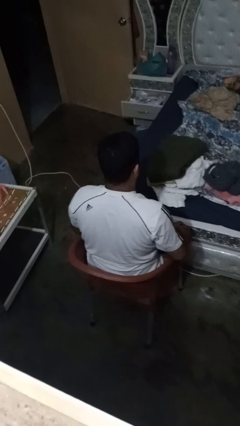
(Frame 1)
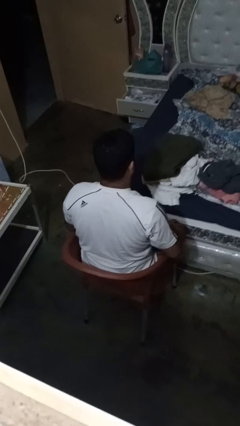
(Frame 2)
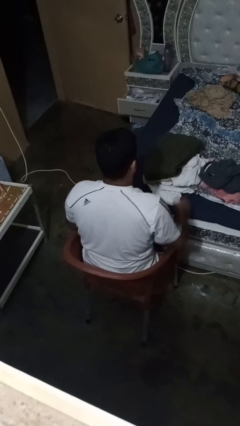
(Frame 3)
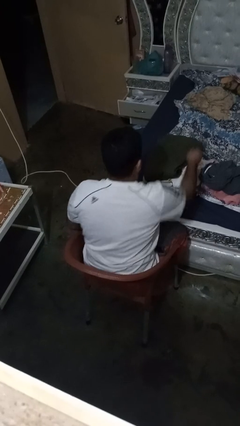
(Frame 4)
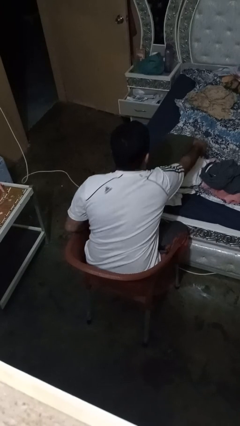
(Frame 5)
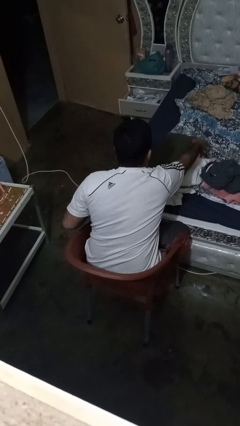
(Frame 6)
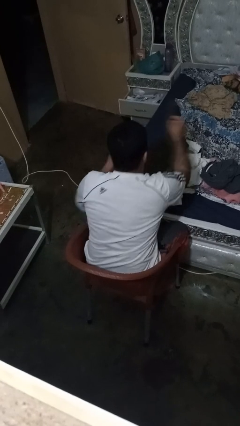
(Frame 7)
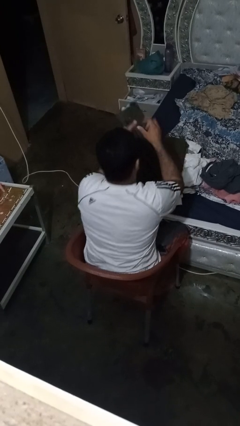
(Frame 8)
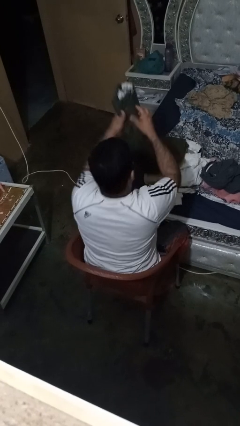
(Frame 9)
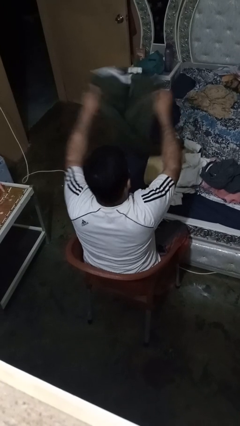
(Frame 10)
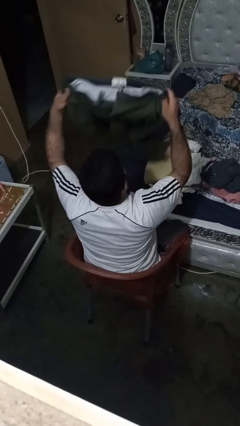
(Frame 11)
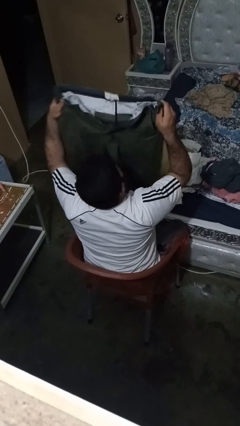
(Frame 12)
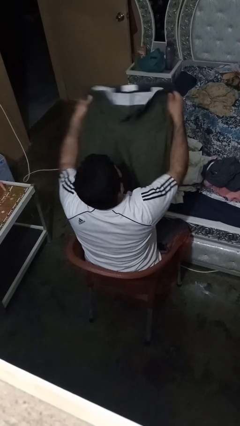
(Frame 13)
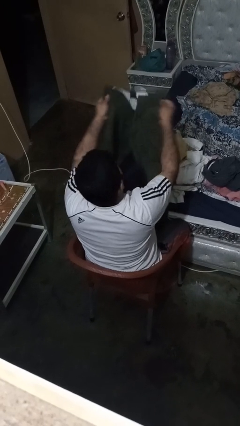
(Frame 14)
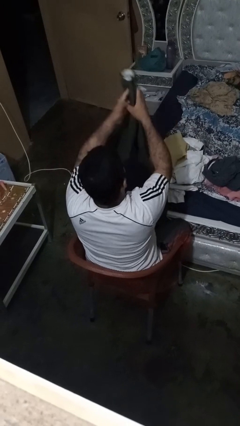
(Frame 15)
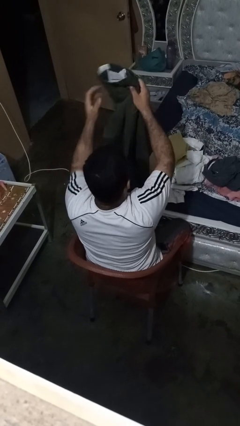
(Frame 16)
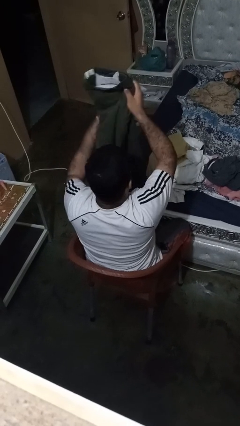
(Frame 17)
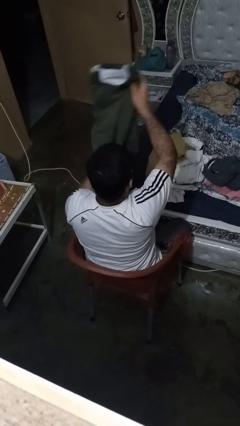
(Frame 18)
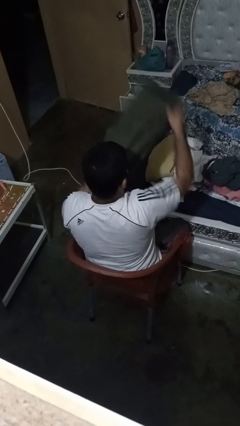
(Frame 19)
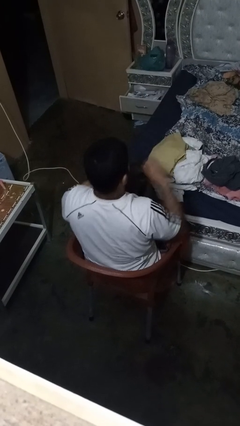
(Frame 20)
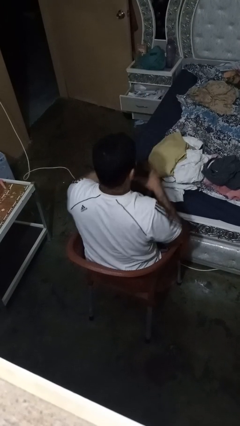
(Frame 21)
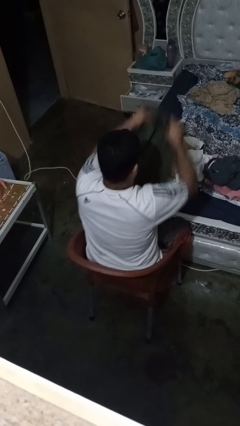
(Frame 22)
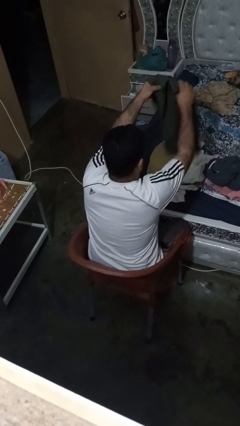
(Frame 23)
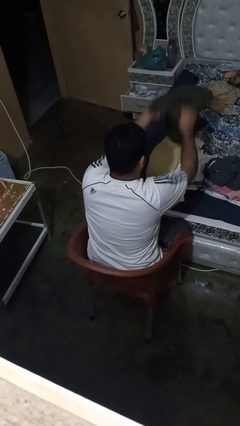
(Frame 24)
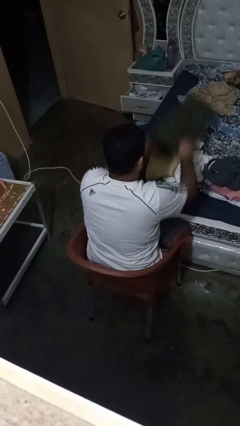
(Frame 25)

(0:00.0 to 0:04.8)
person folds pants

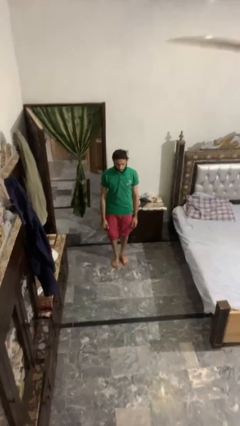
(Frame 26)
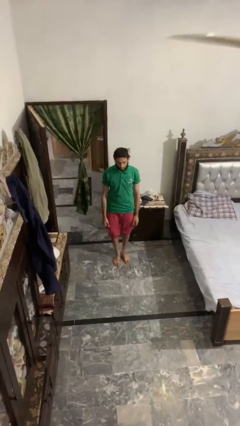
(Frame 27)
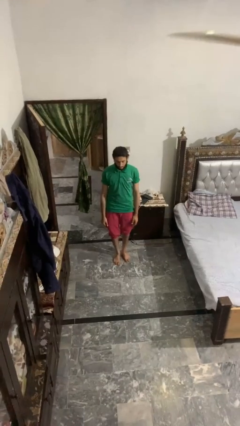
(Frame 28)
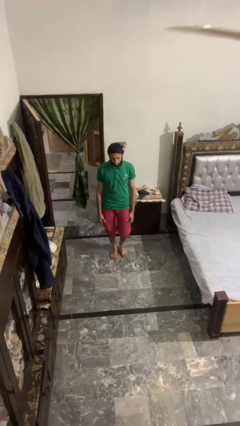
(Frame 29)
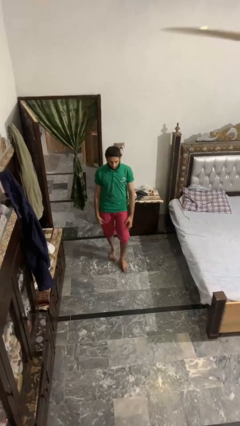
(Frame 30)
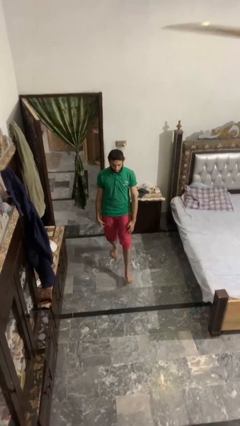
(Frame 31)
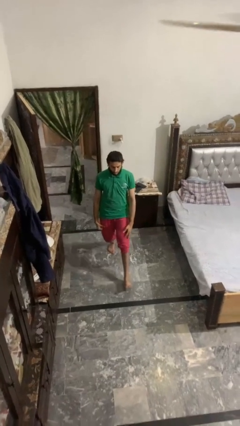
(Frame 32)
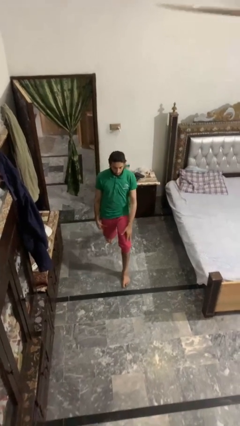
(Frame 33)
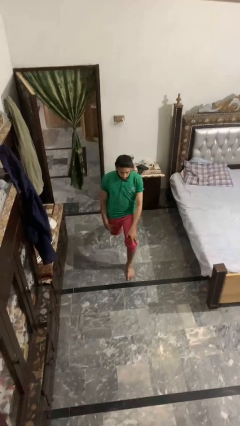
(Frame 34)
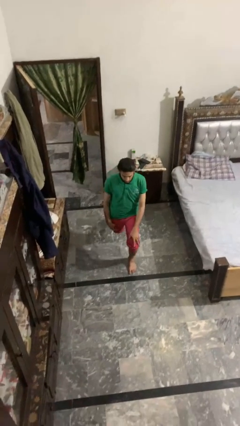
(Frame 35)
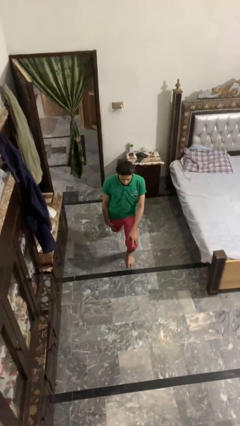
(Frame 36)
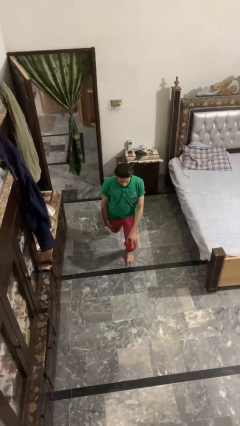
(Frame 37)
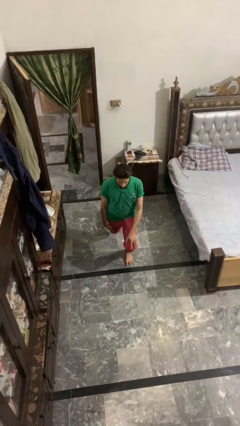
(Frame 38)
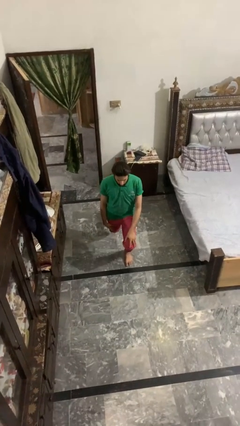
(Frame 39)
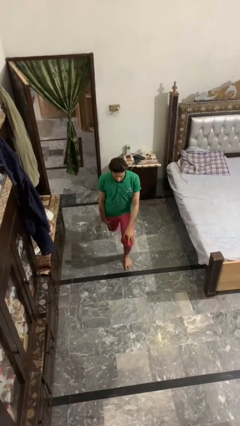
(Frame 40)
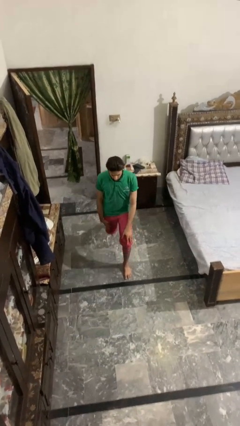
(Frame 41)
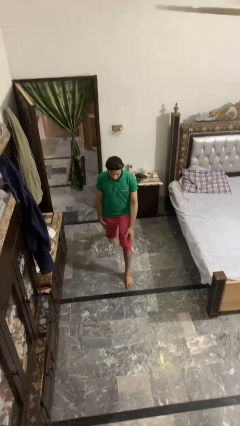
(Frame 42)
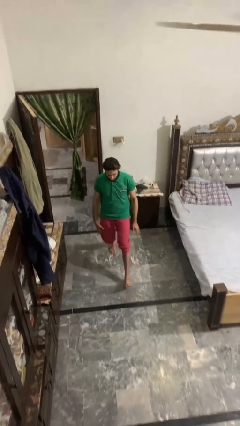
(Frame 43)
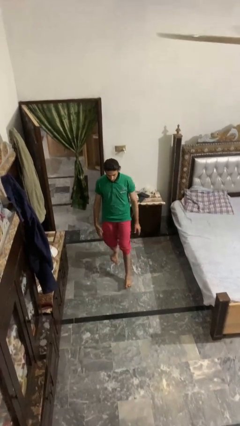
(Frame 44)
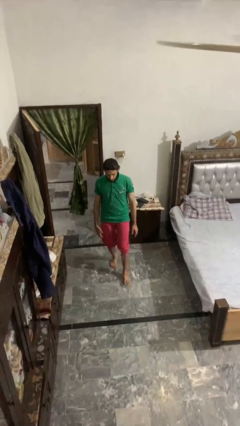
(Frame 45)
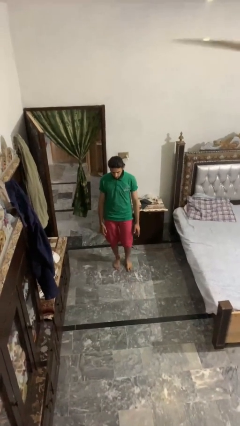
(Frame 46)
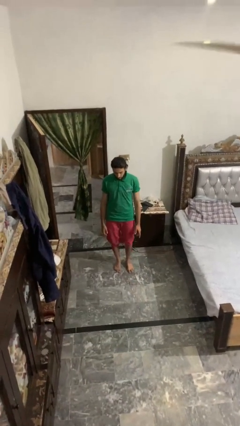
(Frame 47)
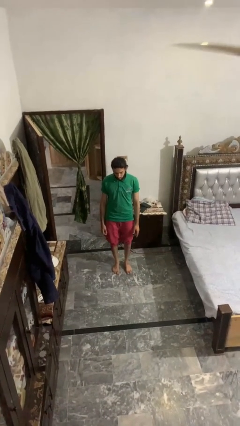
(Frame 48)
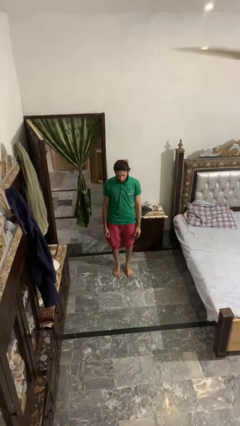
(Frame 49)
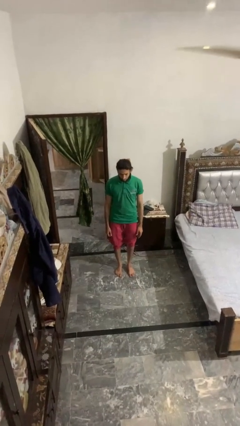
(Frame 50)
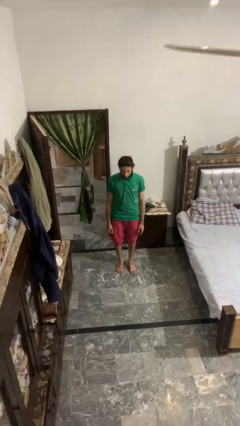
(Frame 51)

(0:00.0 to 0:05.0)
person exercises with lunges

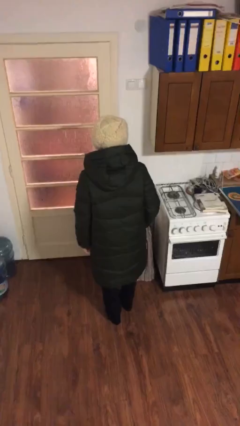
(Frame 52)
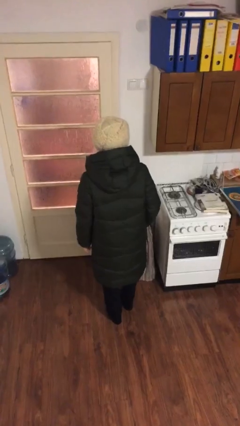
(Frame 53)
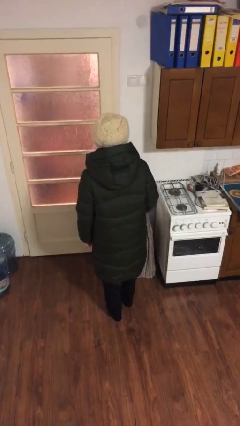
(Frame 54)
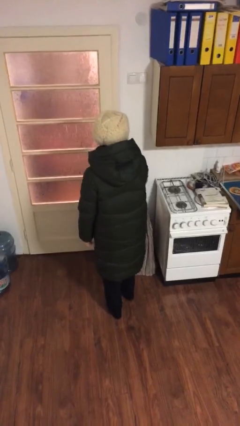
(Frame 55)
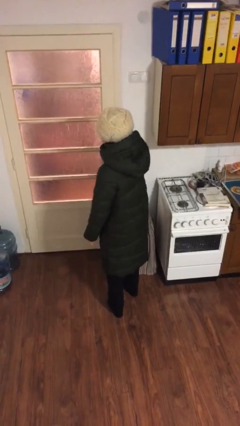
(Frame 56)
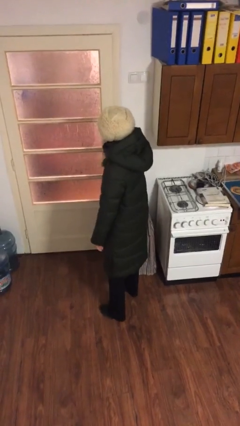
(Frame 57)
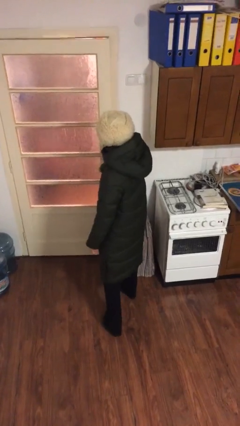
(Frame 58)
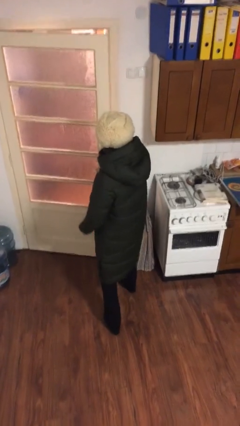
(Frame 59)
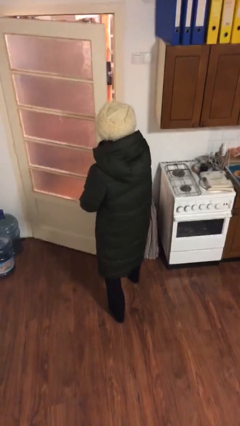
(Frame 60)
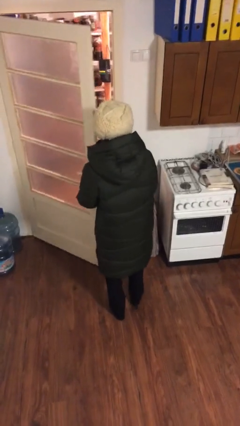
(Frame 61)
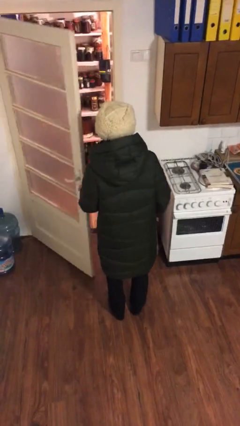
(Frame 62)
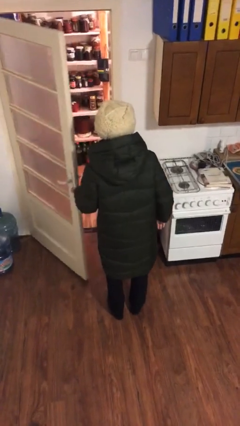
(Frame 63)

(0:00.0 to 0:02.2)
person opens facility door

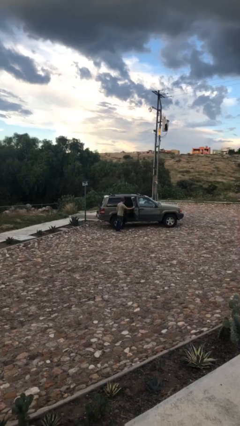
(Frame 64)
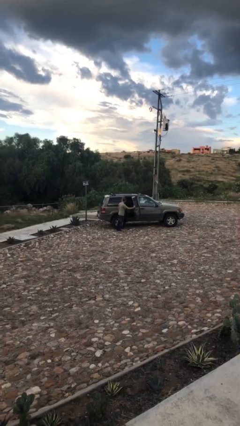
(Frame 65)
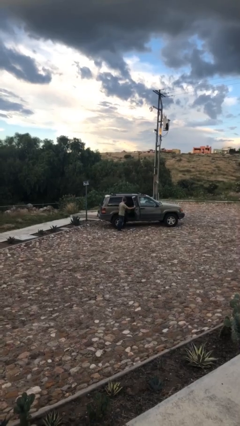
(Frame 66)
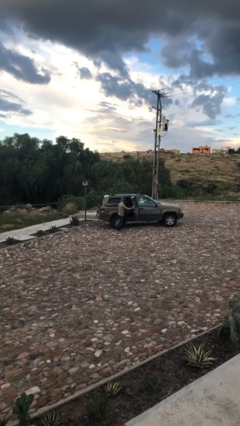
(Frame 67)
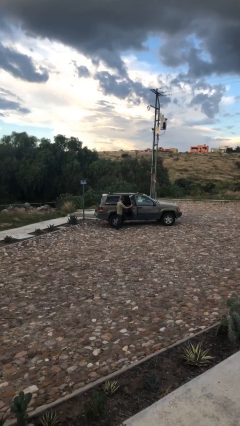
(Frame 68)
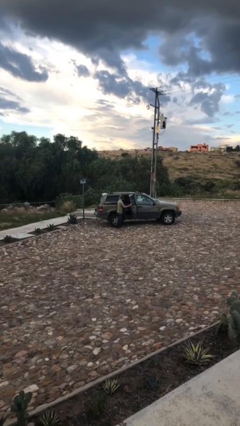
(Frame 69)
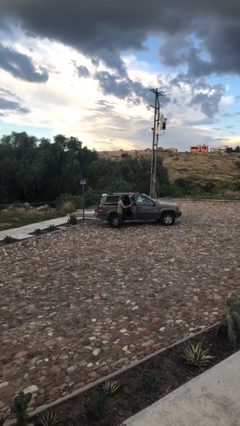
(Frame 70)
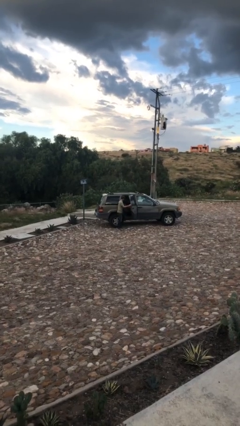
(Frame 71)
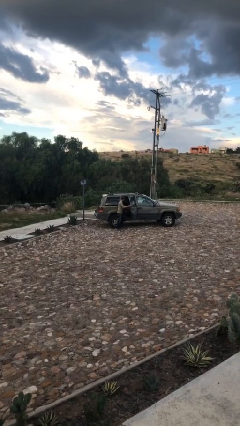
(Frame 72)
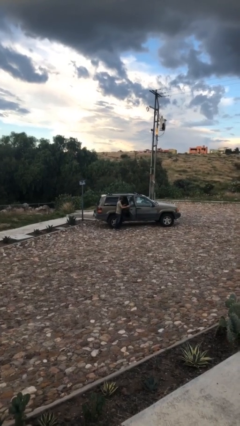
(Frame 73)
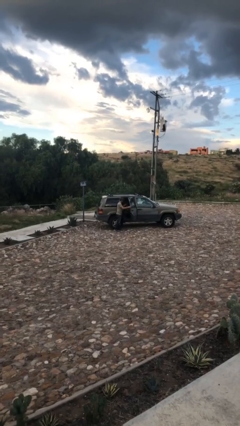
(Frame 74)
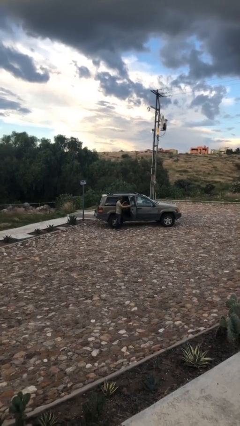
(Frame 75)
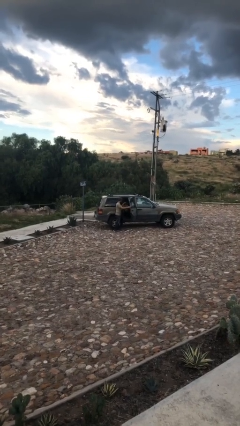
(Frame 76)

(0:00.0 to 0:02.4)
person unloads car

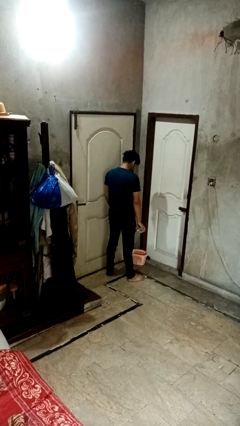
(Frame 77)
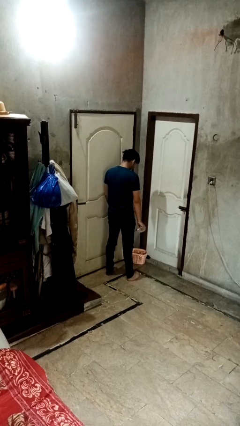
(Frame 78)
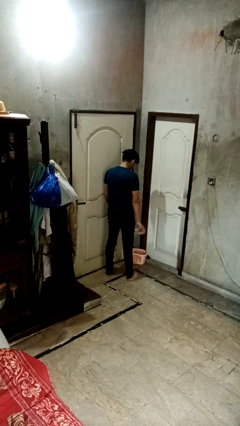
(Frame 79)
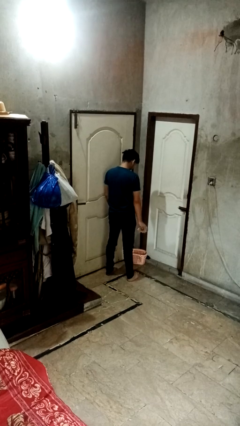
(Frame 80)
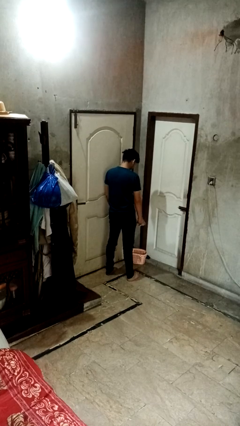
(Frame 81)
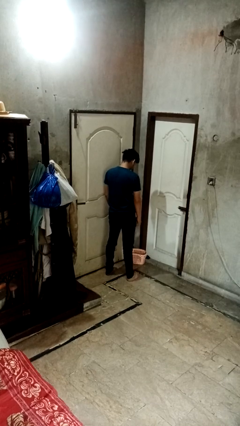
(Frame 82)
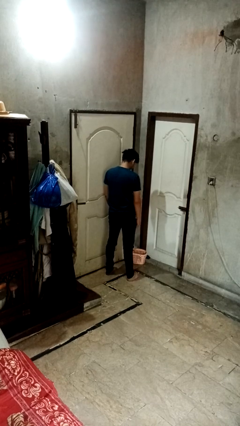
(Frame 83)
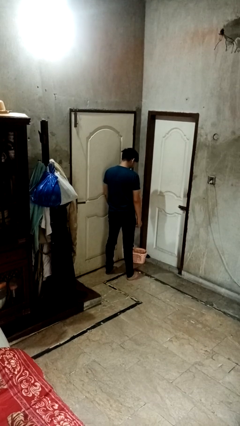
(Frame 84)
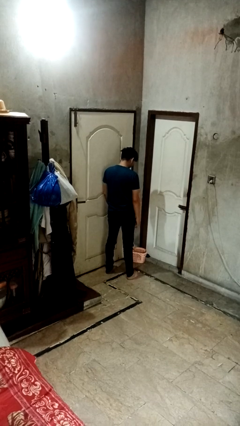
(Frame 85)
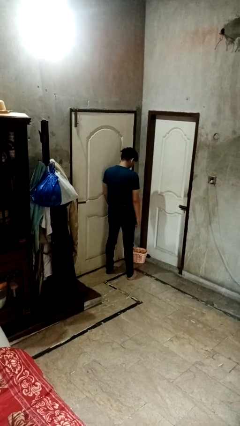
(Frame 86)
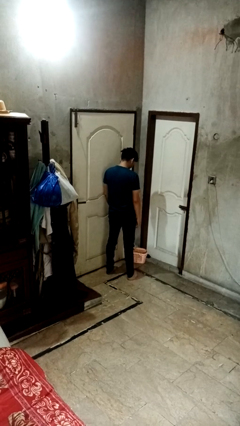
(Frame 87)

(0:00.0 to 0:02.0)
person discards trash

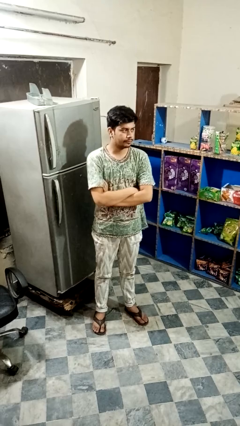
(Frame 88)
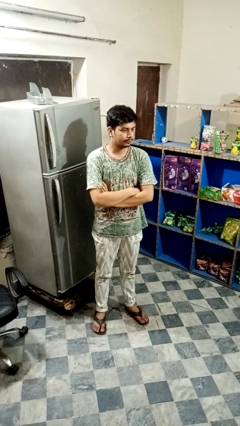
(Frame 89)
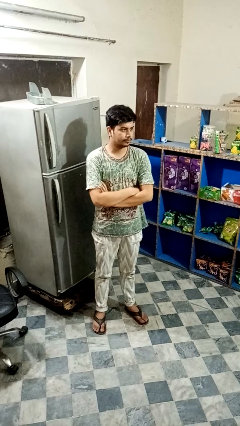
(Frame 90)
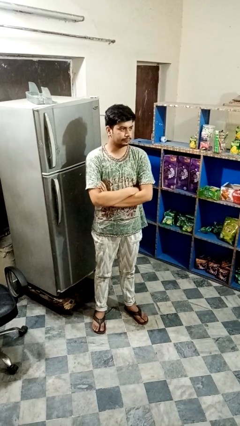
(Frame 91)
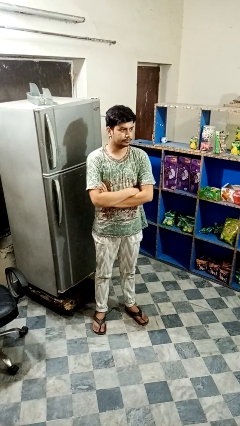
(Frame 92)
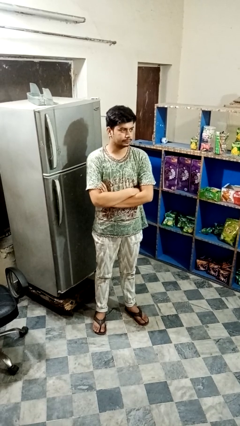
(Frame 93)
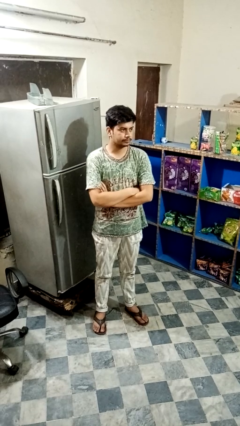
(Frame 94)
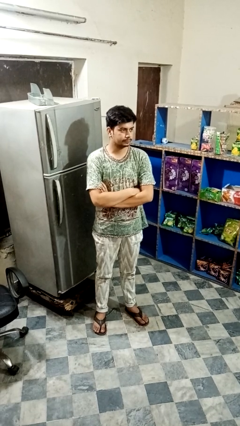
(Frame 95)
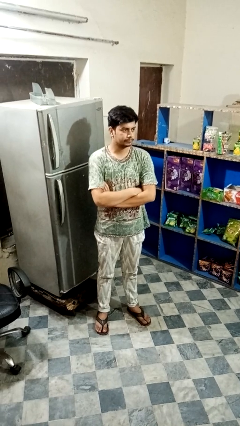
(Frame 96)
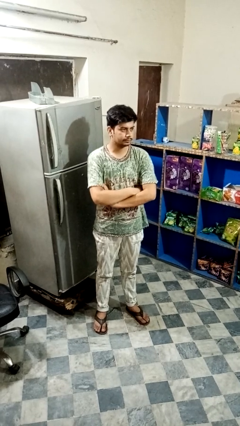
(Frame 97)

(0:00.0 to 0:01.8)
person crosses arms
